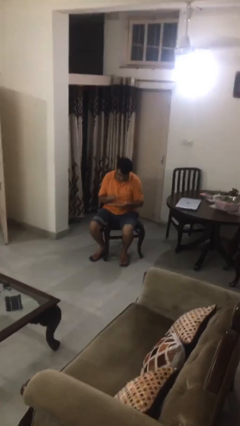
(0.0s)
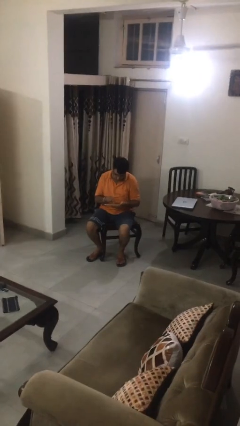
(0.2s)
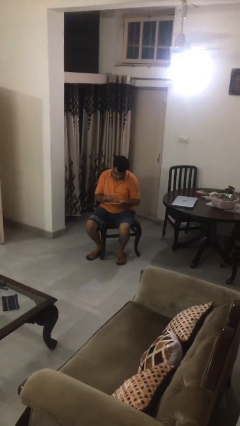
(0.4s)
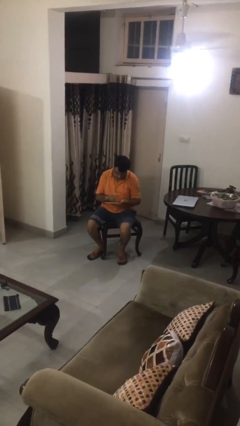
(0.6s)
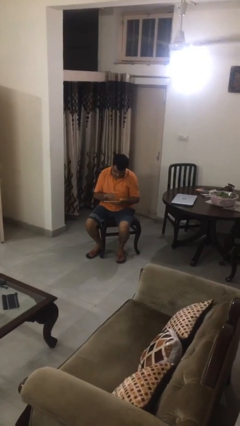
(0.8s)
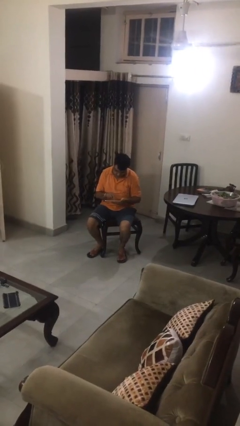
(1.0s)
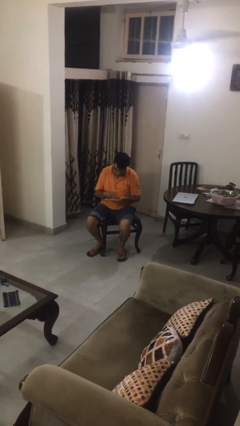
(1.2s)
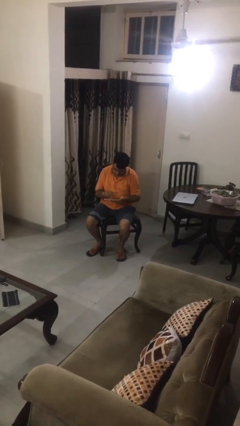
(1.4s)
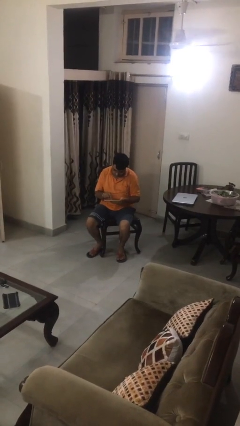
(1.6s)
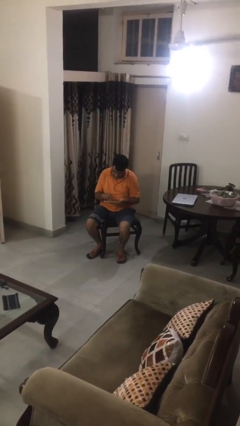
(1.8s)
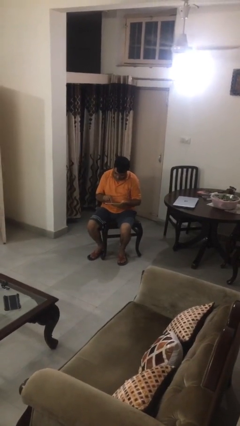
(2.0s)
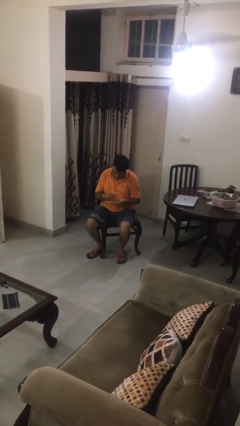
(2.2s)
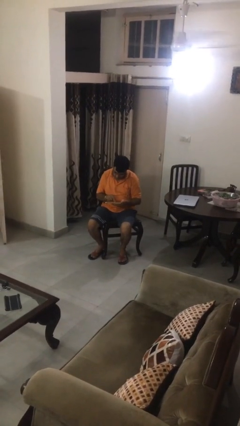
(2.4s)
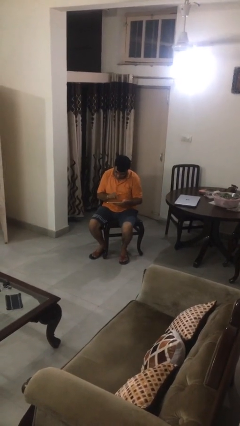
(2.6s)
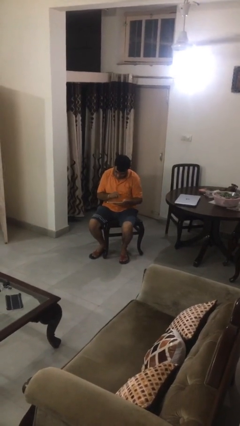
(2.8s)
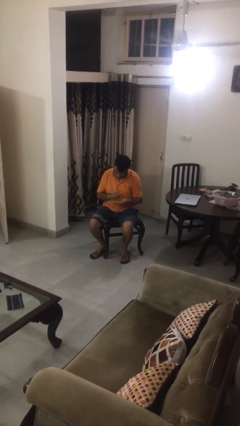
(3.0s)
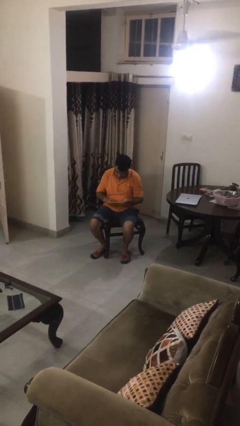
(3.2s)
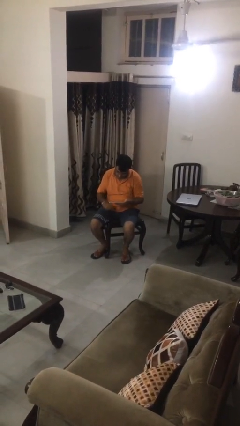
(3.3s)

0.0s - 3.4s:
person interacts with tablet

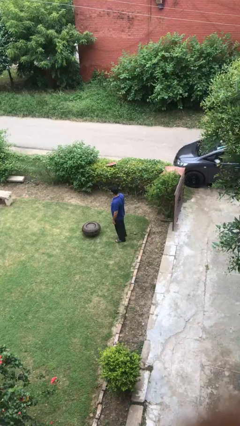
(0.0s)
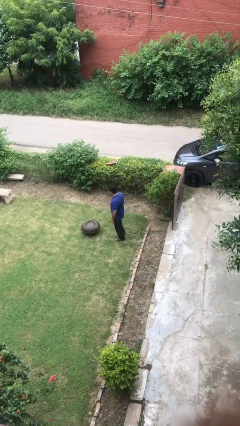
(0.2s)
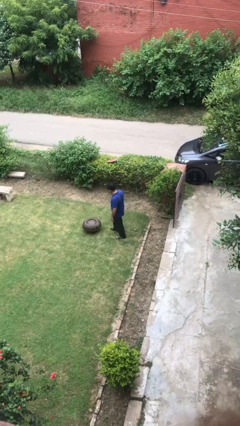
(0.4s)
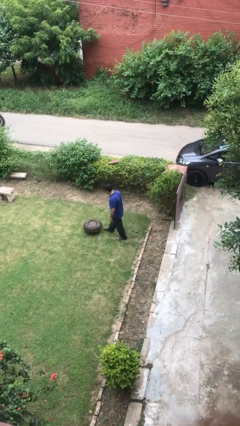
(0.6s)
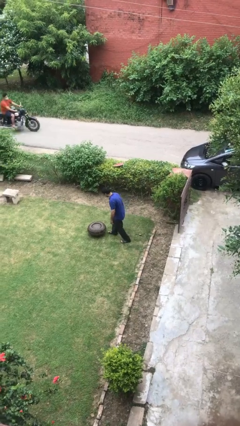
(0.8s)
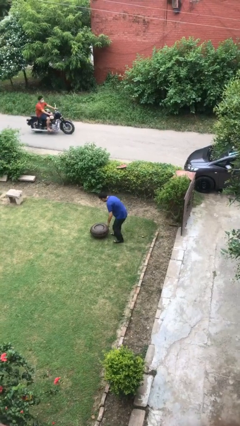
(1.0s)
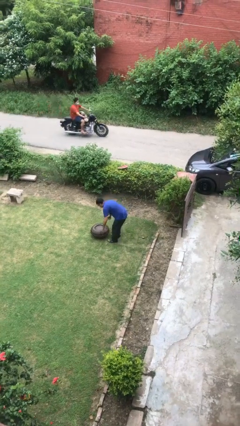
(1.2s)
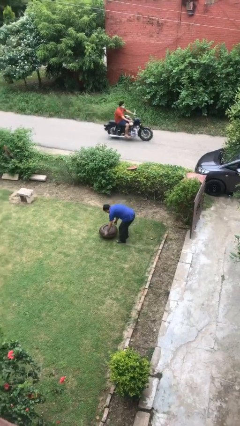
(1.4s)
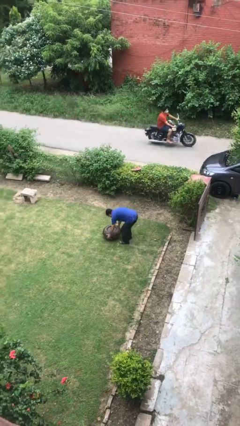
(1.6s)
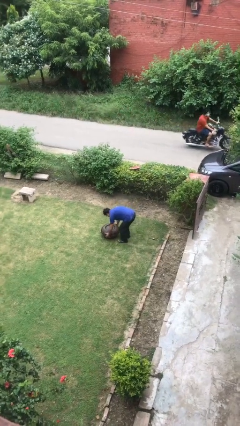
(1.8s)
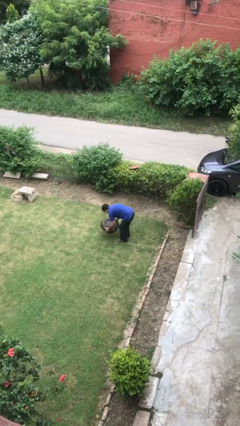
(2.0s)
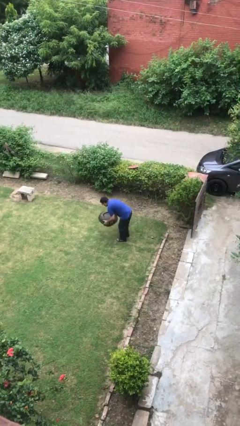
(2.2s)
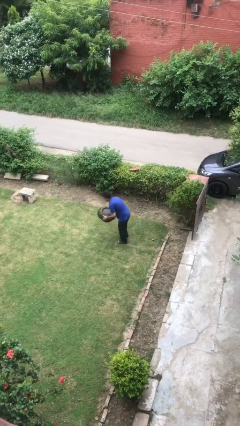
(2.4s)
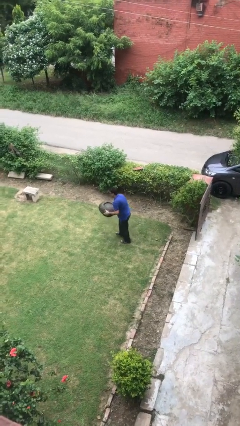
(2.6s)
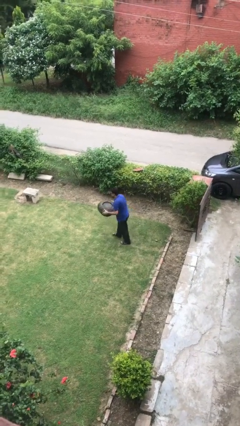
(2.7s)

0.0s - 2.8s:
person picks up object from floor

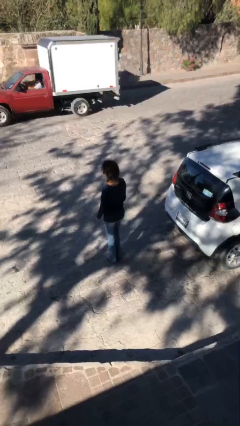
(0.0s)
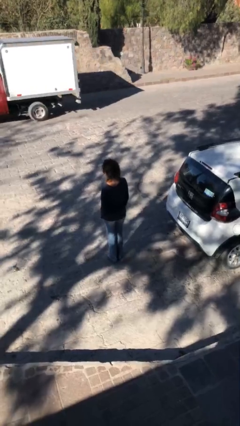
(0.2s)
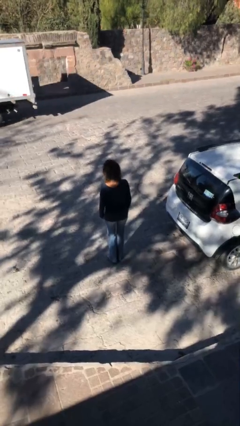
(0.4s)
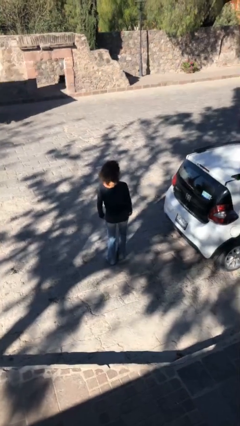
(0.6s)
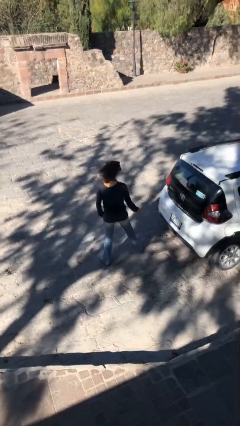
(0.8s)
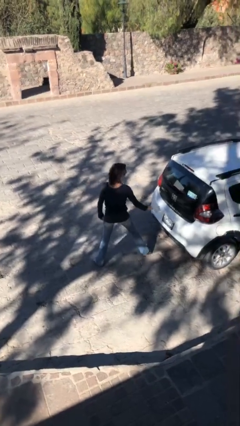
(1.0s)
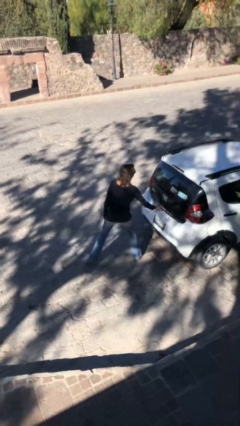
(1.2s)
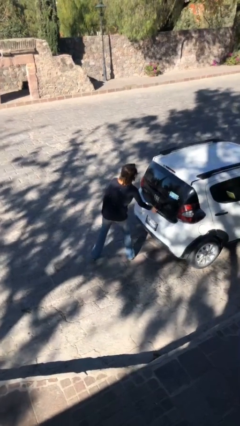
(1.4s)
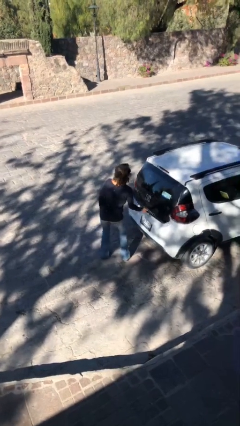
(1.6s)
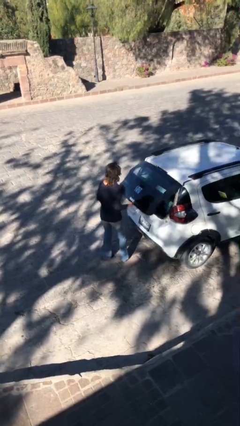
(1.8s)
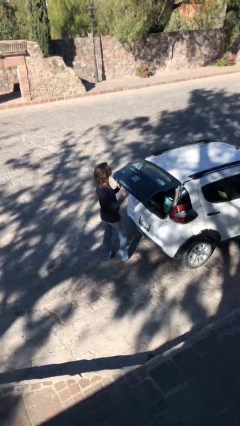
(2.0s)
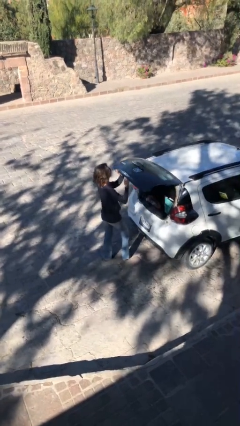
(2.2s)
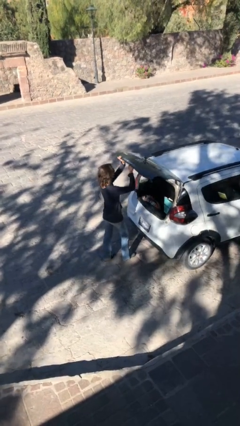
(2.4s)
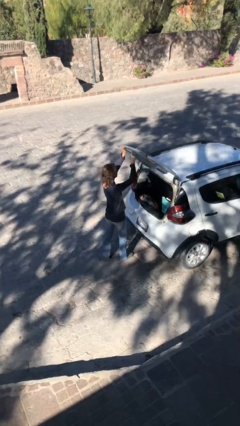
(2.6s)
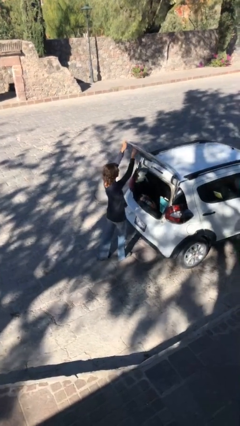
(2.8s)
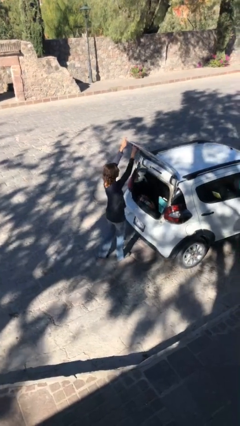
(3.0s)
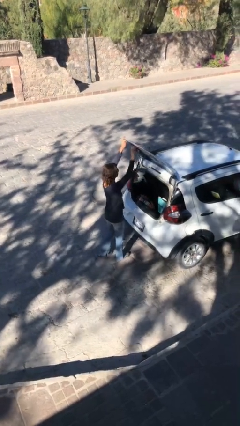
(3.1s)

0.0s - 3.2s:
person opens car trunk

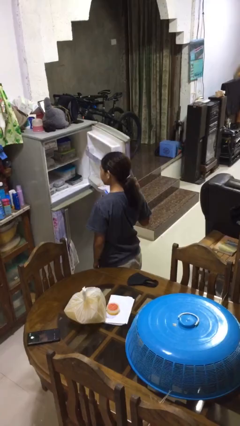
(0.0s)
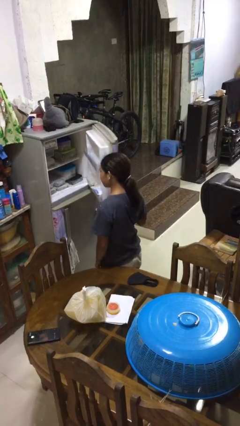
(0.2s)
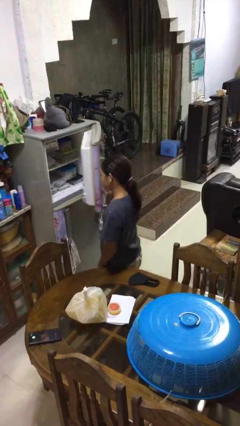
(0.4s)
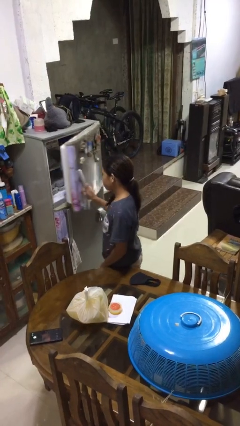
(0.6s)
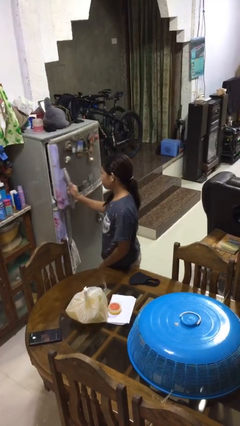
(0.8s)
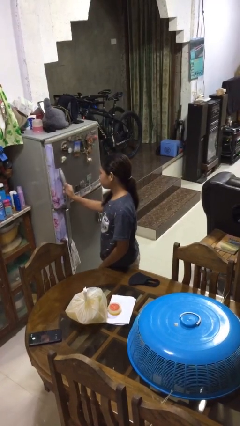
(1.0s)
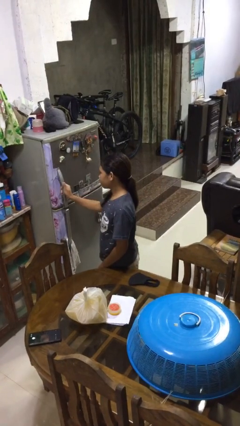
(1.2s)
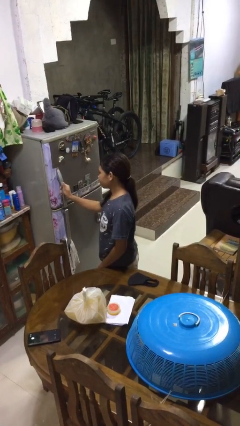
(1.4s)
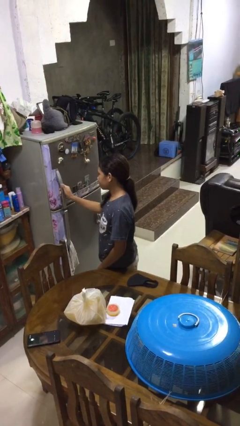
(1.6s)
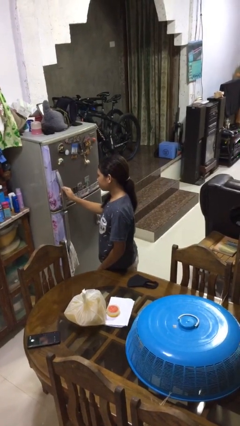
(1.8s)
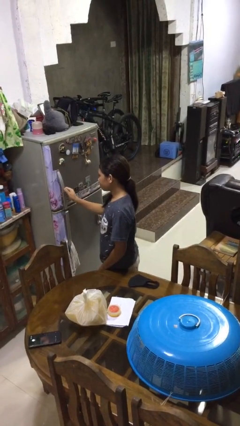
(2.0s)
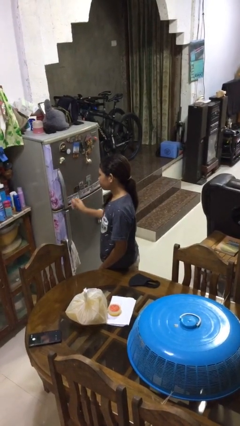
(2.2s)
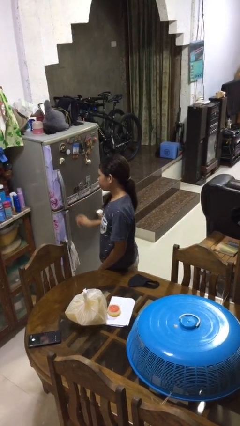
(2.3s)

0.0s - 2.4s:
person closes refrigerator

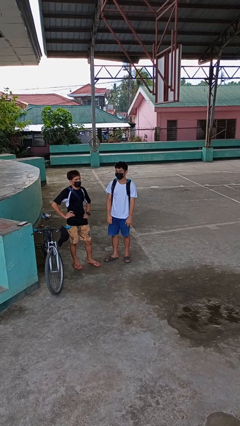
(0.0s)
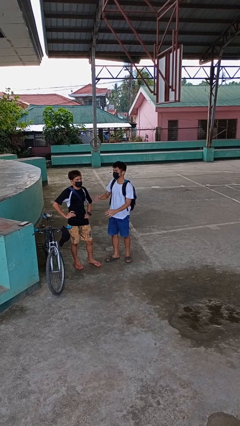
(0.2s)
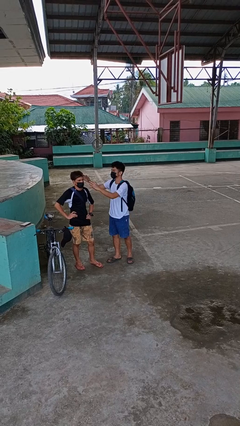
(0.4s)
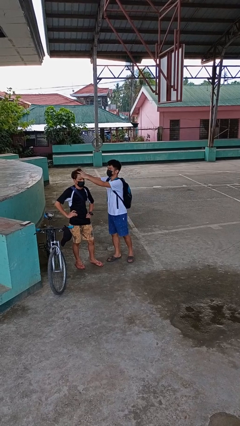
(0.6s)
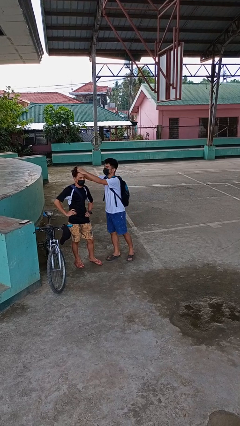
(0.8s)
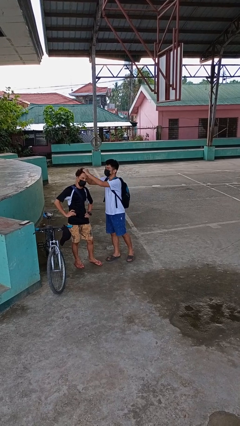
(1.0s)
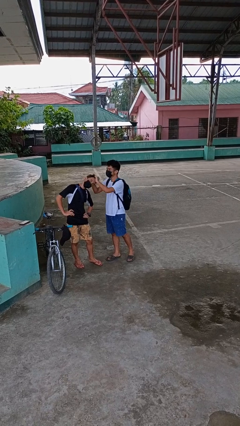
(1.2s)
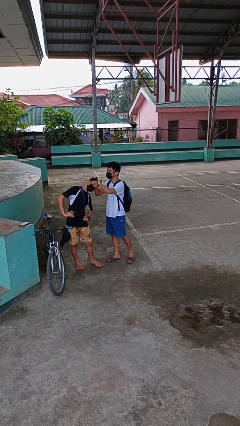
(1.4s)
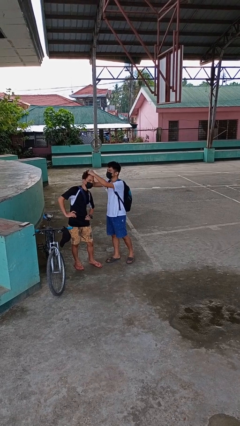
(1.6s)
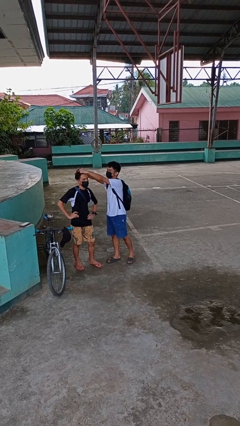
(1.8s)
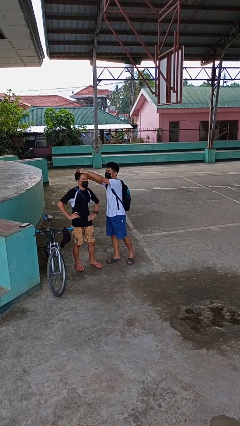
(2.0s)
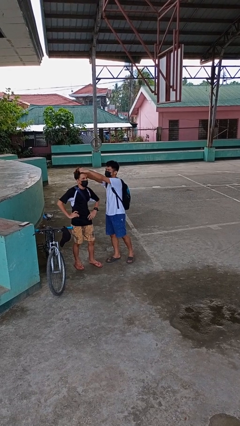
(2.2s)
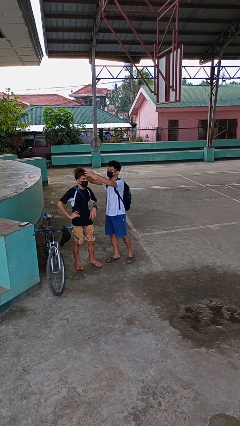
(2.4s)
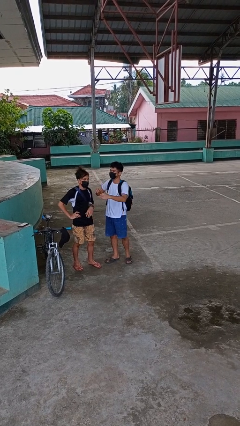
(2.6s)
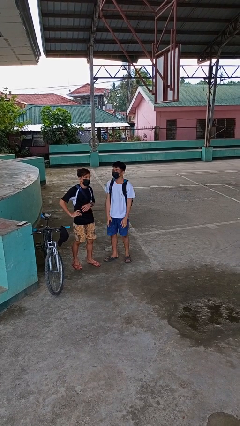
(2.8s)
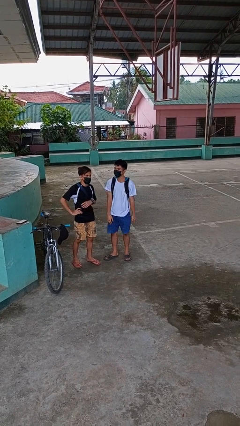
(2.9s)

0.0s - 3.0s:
person grabs person by hair

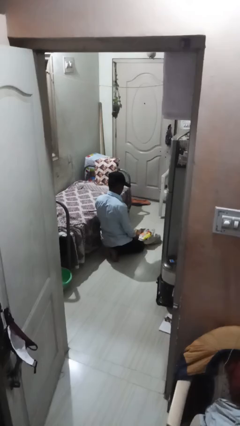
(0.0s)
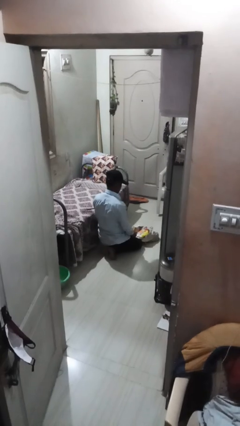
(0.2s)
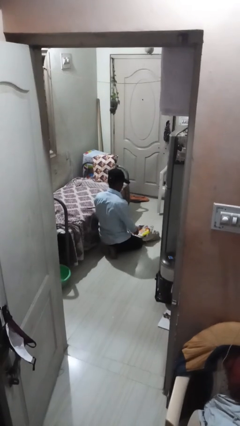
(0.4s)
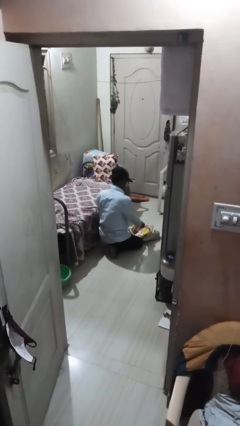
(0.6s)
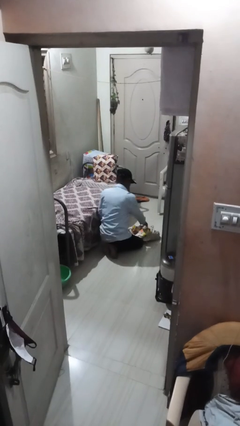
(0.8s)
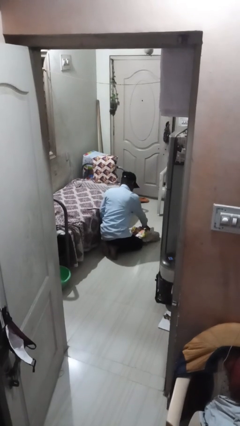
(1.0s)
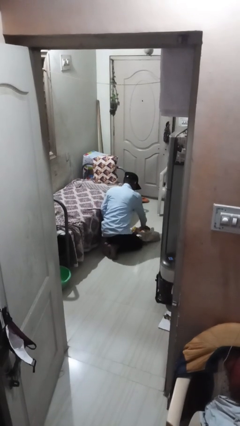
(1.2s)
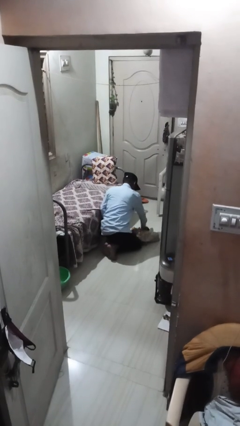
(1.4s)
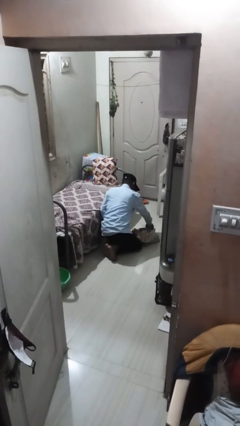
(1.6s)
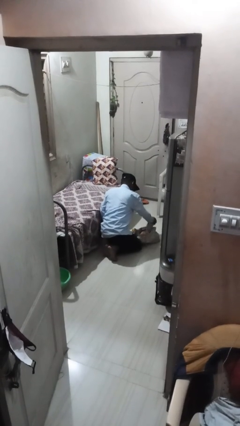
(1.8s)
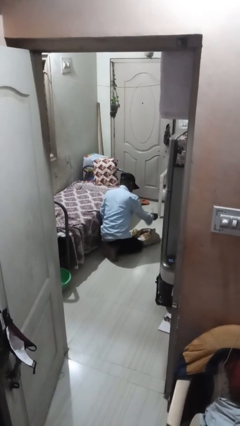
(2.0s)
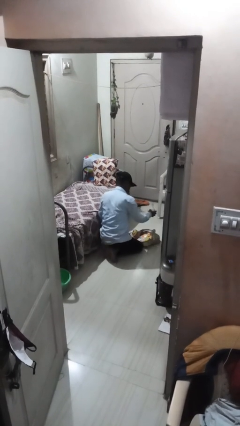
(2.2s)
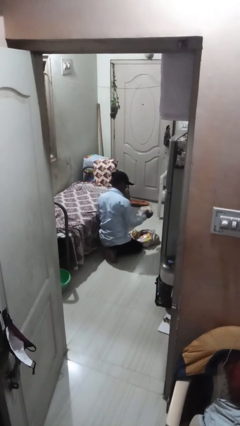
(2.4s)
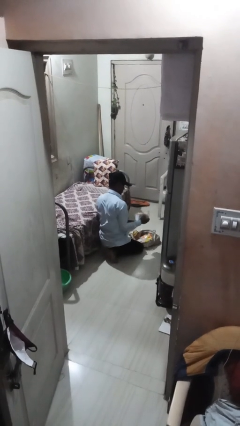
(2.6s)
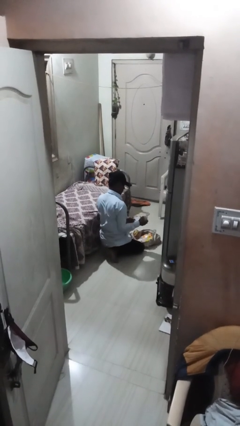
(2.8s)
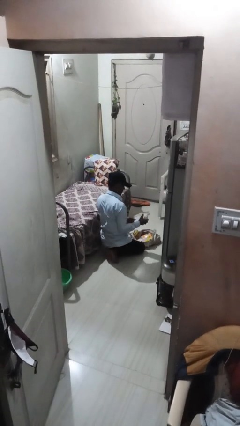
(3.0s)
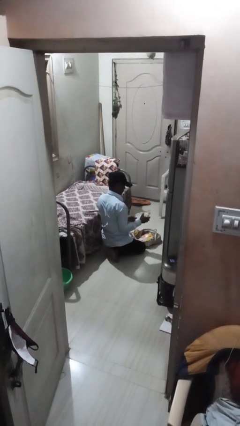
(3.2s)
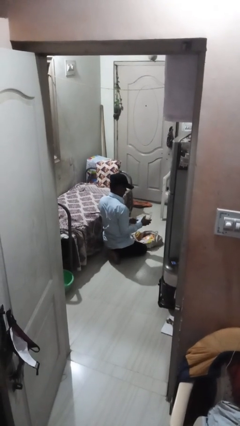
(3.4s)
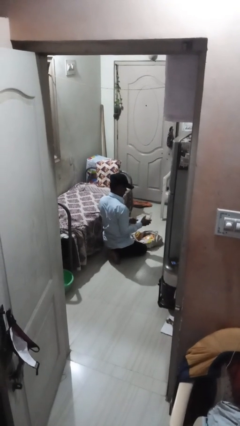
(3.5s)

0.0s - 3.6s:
person takes object from bag
